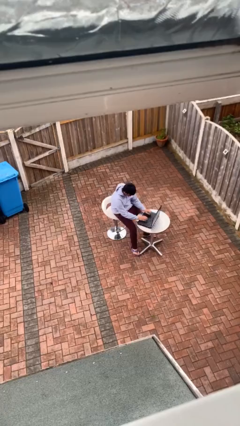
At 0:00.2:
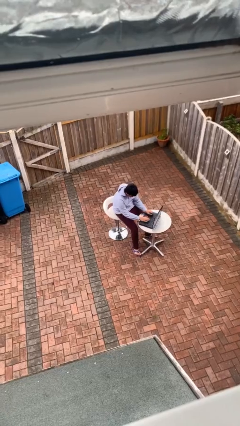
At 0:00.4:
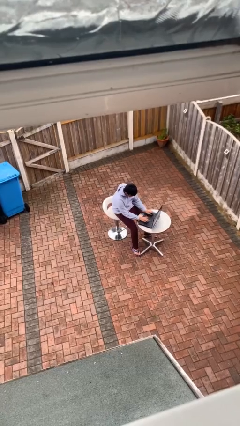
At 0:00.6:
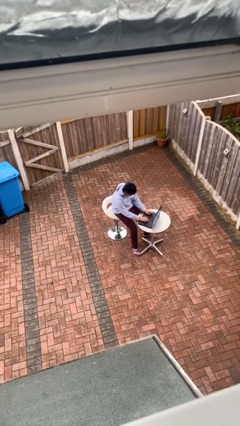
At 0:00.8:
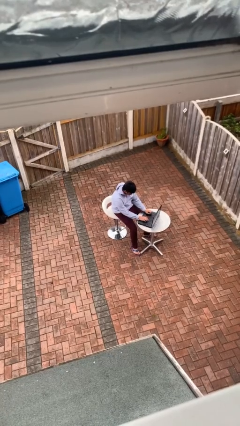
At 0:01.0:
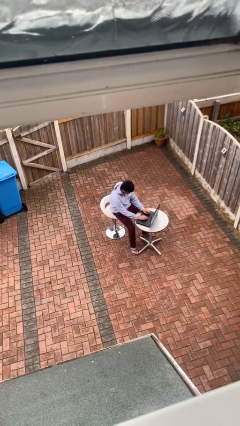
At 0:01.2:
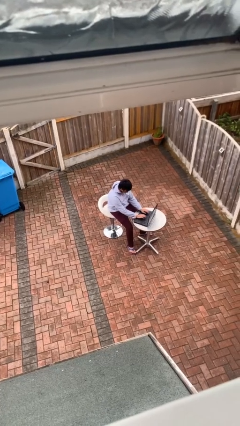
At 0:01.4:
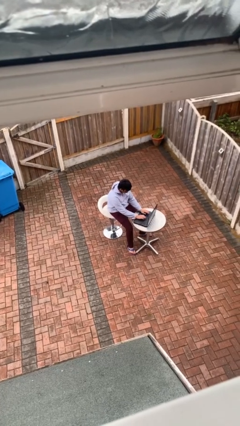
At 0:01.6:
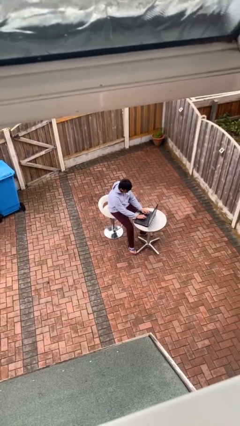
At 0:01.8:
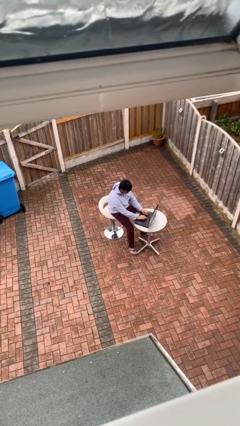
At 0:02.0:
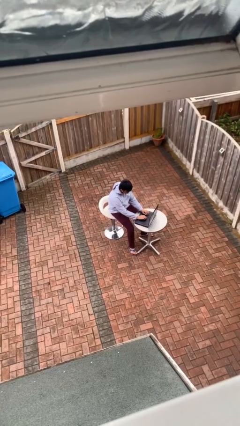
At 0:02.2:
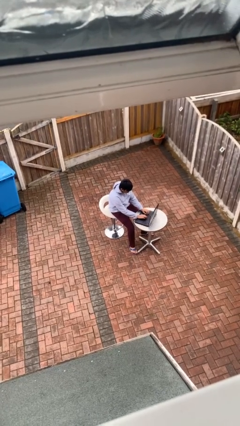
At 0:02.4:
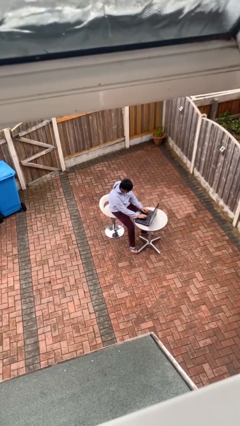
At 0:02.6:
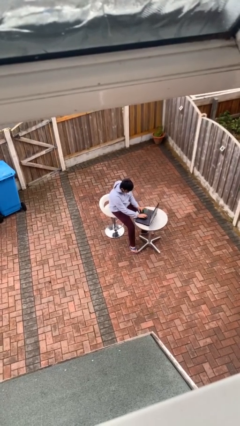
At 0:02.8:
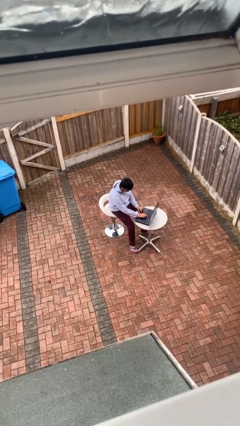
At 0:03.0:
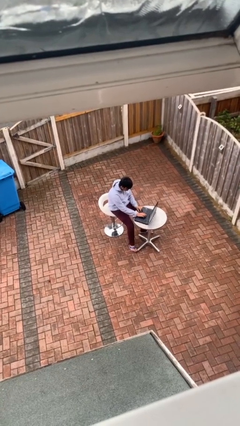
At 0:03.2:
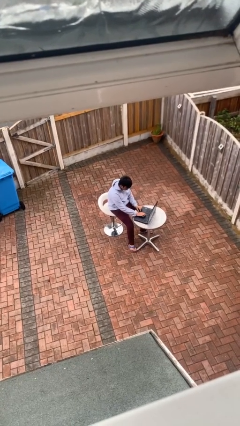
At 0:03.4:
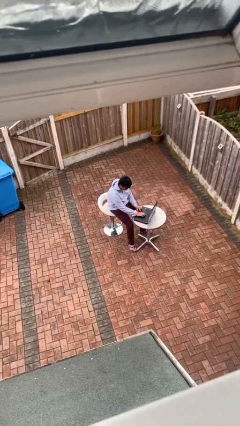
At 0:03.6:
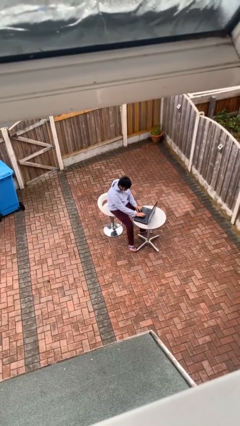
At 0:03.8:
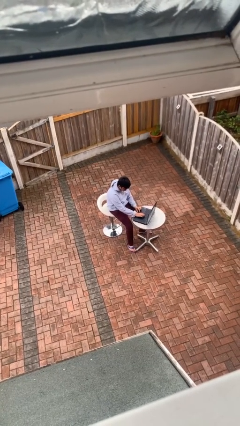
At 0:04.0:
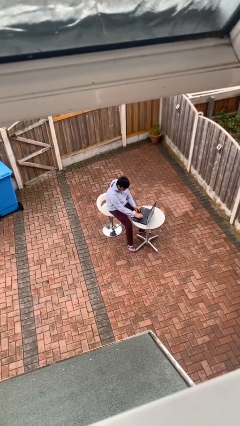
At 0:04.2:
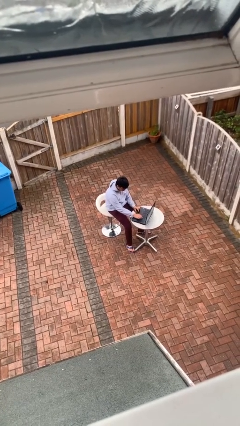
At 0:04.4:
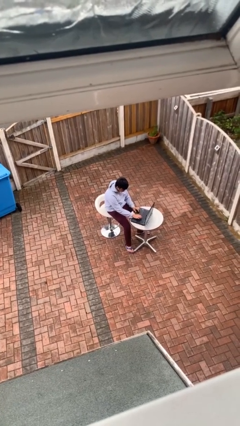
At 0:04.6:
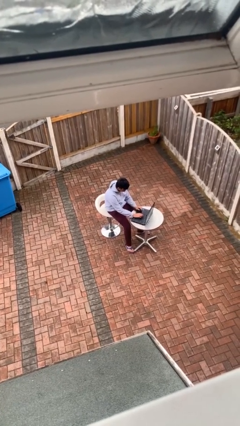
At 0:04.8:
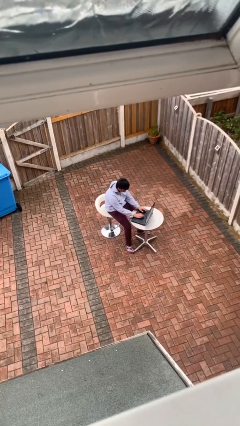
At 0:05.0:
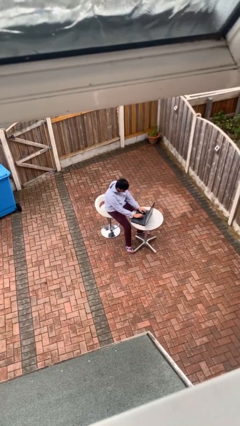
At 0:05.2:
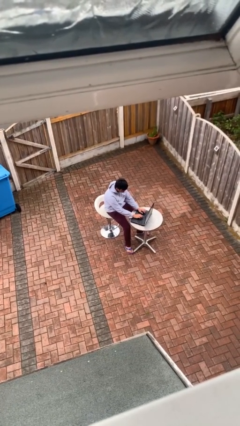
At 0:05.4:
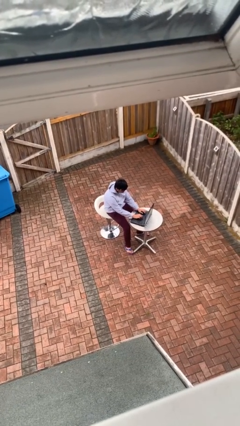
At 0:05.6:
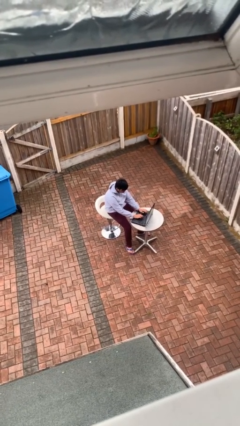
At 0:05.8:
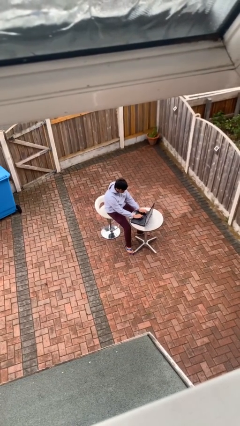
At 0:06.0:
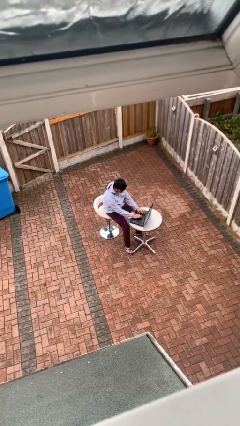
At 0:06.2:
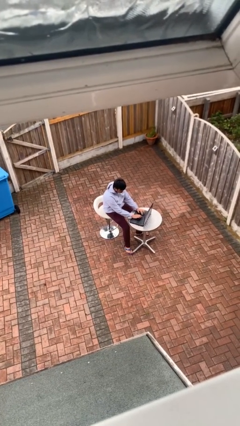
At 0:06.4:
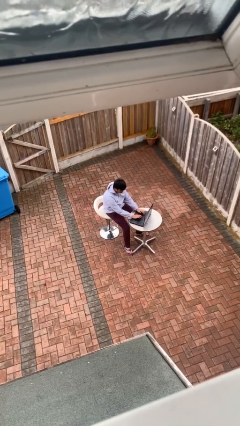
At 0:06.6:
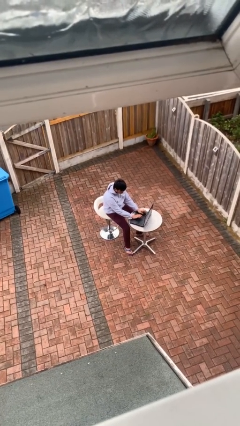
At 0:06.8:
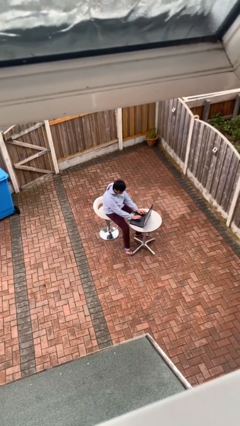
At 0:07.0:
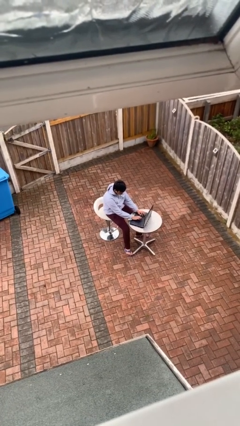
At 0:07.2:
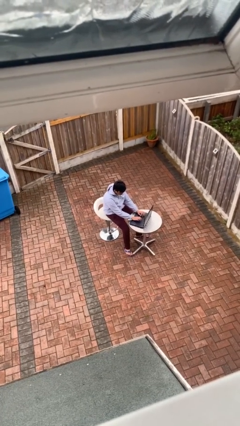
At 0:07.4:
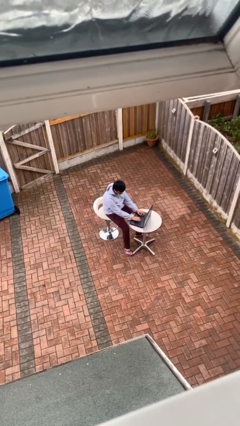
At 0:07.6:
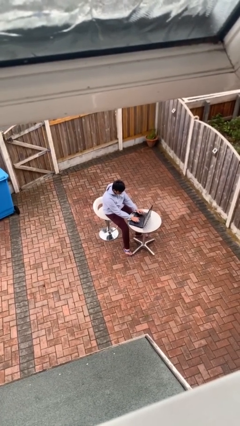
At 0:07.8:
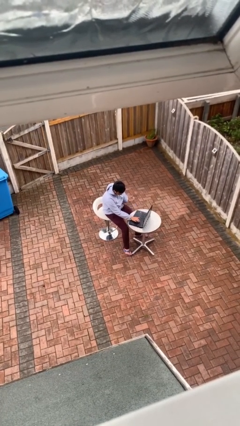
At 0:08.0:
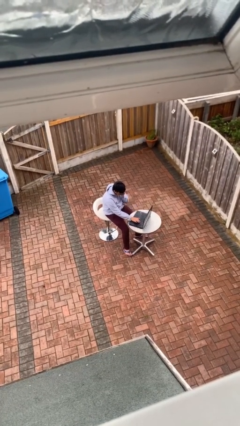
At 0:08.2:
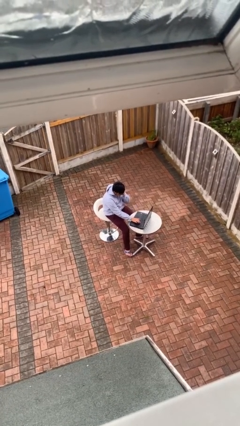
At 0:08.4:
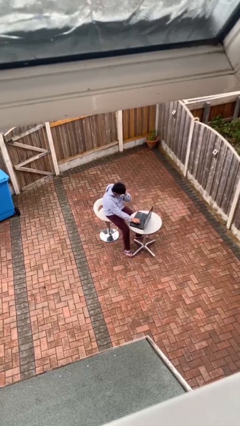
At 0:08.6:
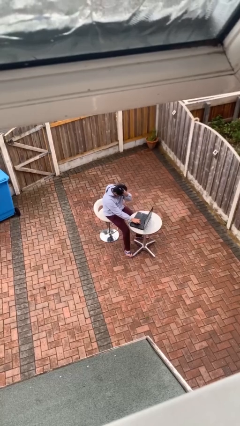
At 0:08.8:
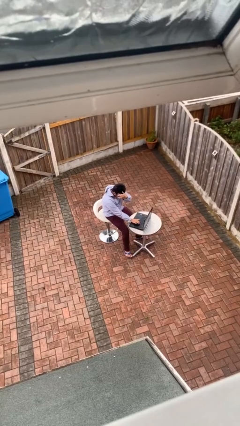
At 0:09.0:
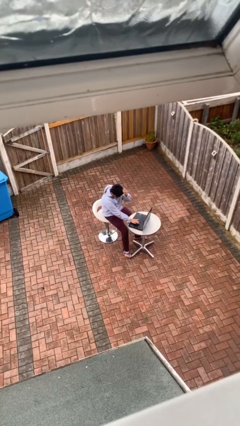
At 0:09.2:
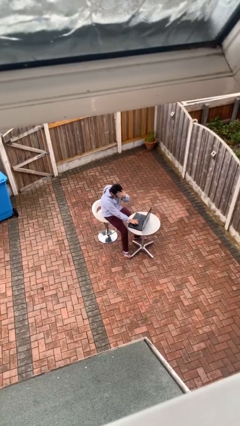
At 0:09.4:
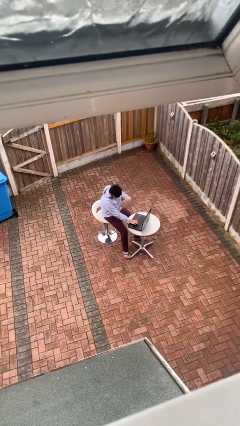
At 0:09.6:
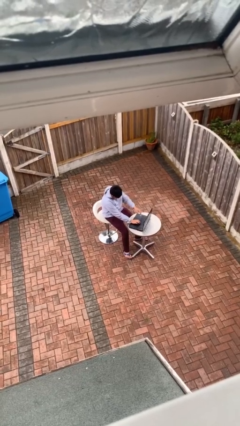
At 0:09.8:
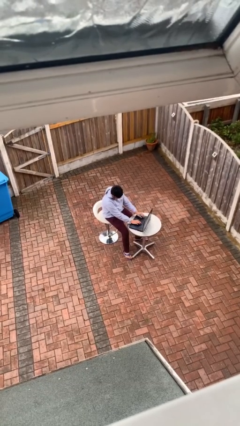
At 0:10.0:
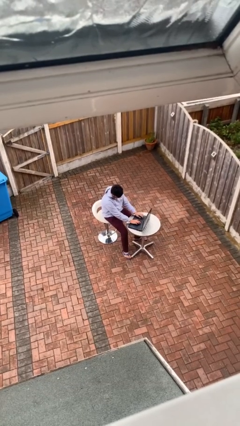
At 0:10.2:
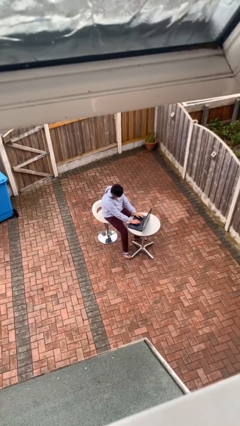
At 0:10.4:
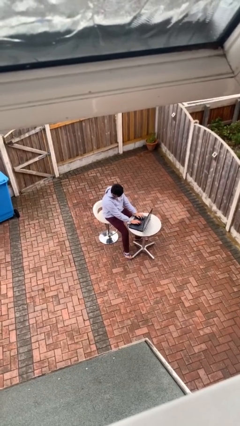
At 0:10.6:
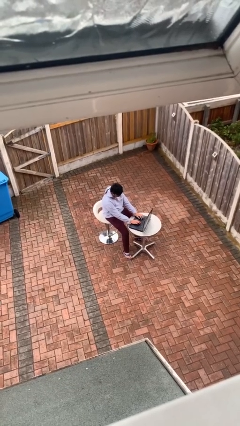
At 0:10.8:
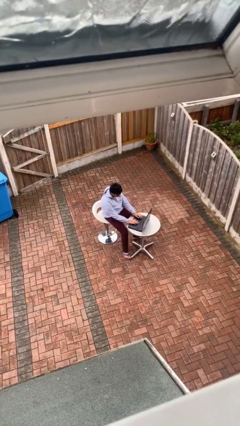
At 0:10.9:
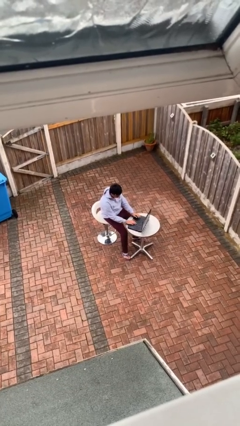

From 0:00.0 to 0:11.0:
person interacts with laptop

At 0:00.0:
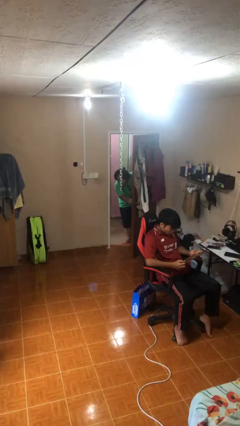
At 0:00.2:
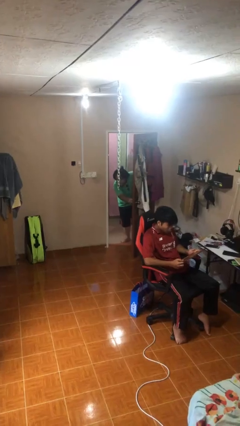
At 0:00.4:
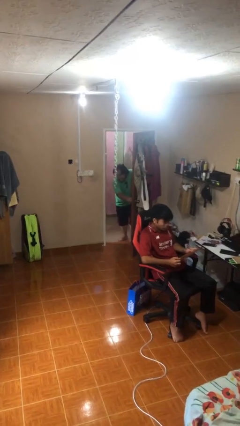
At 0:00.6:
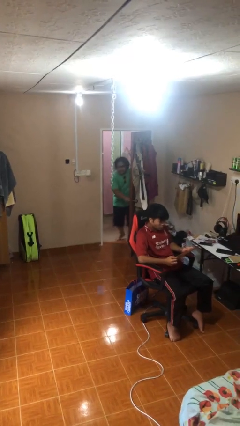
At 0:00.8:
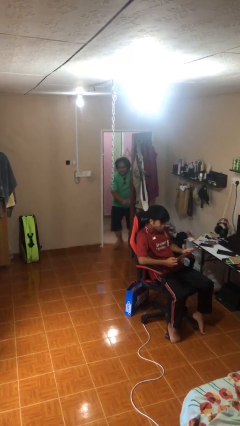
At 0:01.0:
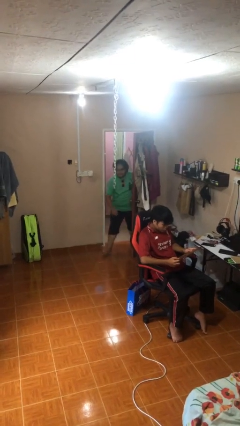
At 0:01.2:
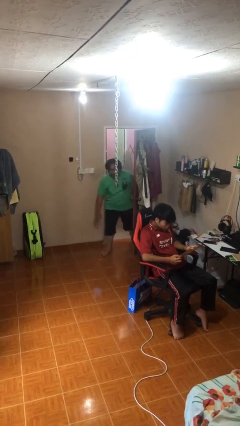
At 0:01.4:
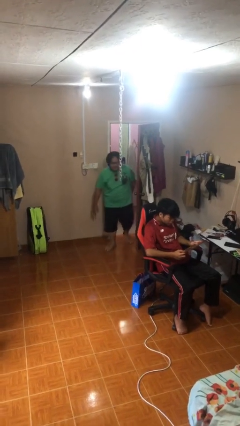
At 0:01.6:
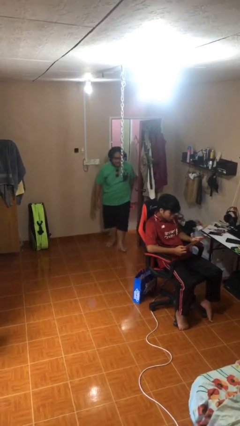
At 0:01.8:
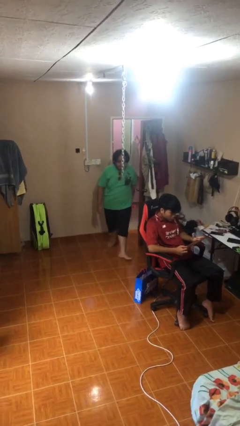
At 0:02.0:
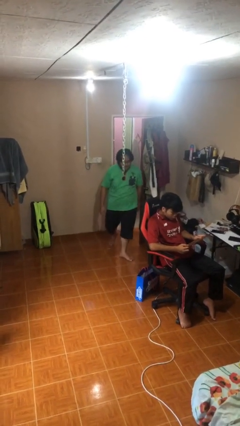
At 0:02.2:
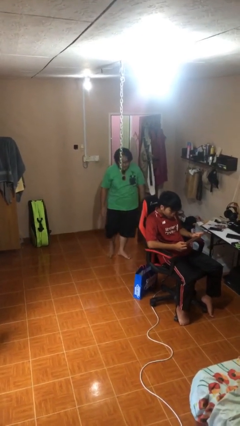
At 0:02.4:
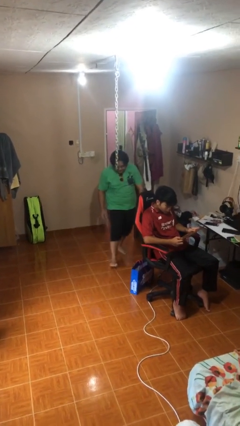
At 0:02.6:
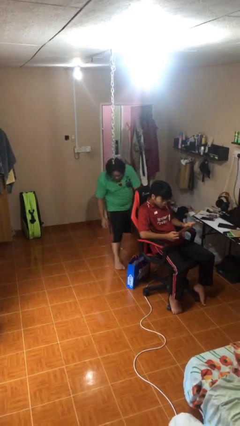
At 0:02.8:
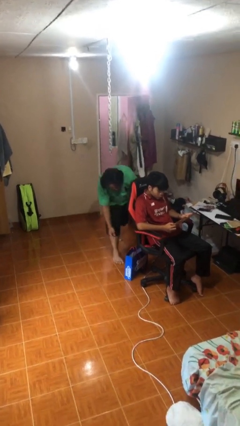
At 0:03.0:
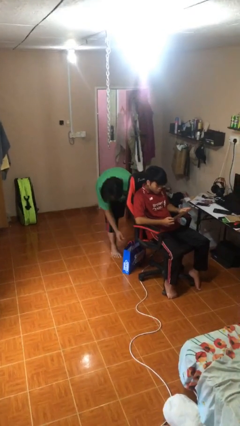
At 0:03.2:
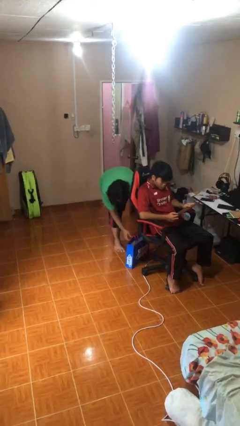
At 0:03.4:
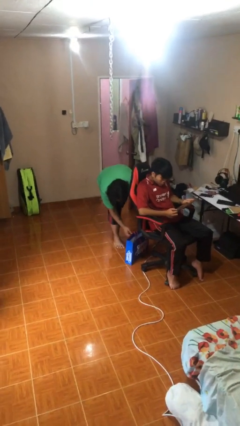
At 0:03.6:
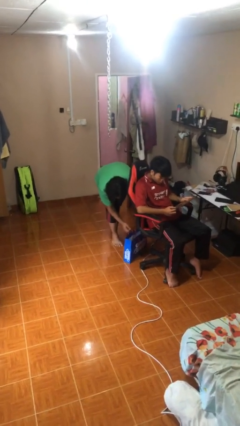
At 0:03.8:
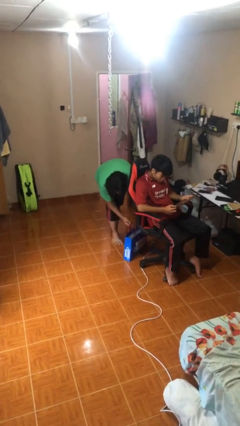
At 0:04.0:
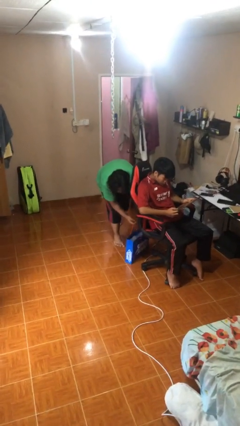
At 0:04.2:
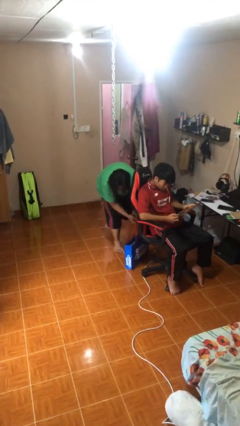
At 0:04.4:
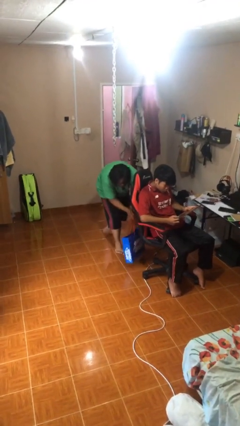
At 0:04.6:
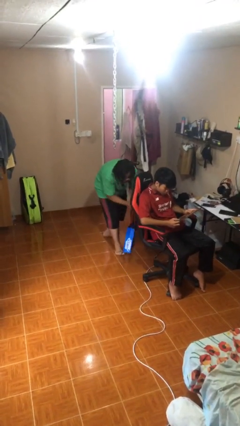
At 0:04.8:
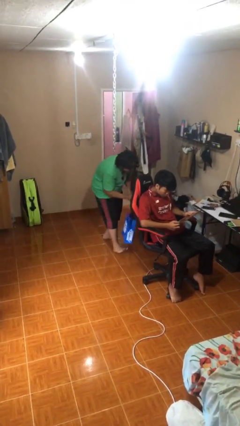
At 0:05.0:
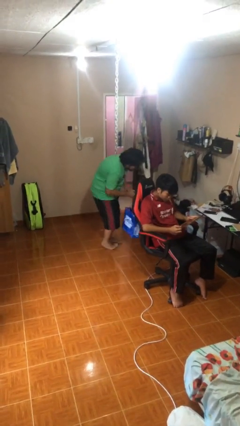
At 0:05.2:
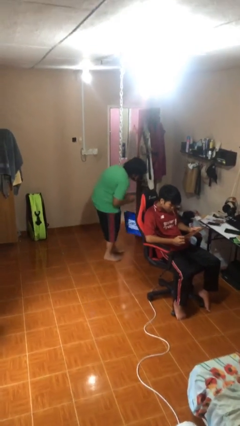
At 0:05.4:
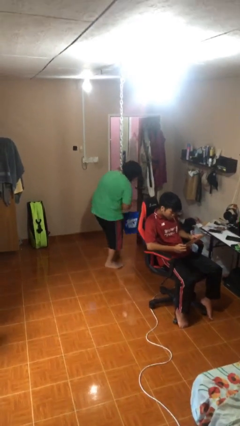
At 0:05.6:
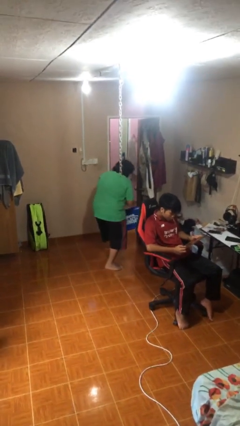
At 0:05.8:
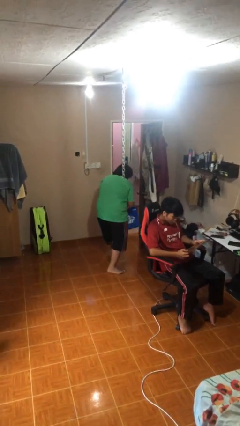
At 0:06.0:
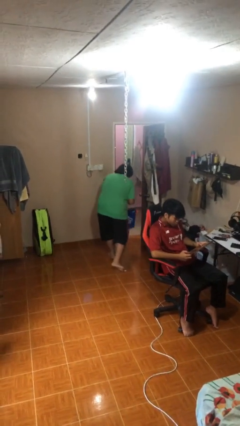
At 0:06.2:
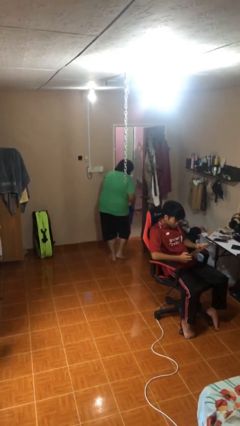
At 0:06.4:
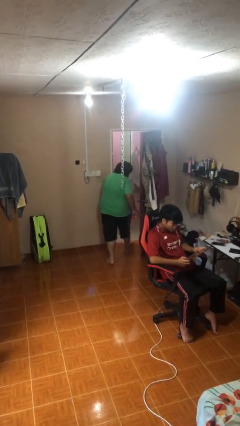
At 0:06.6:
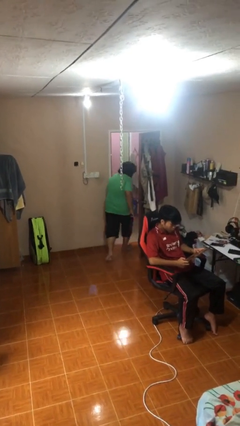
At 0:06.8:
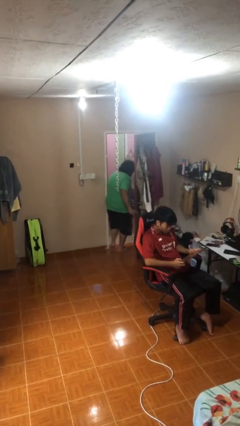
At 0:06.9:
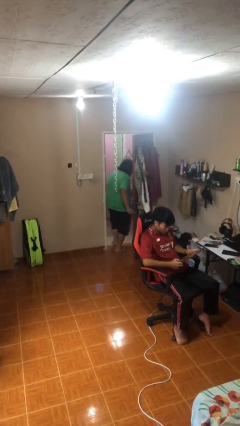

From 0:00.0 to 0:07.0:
person steals object from person

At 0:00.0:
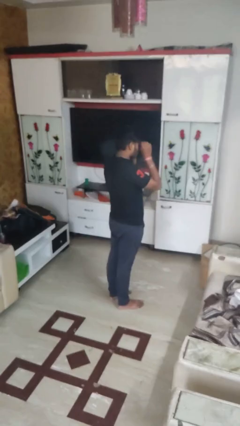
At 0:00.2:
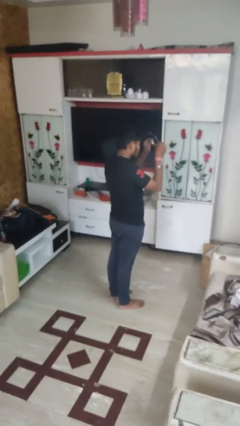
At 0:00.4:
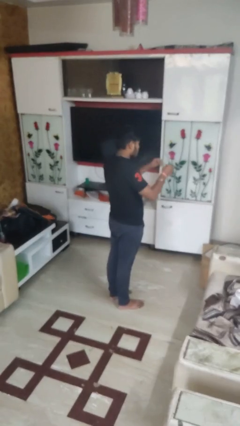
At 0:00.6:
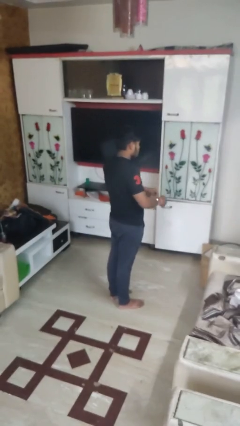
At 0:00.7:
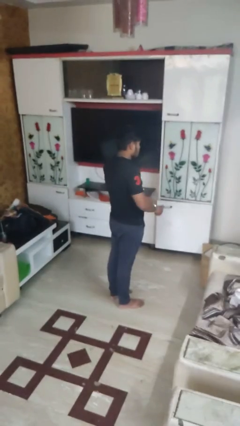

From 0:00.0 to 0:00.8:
person takes off glasses
